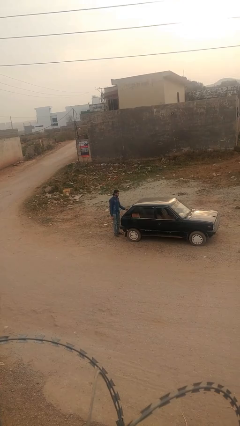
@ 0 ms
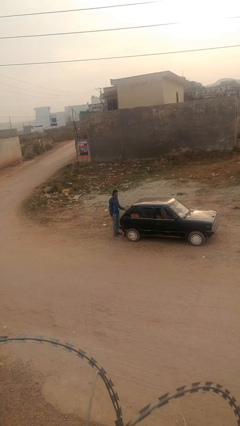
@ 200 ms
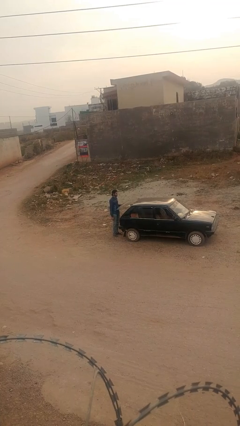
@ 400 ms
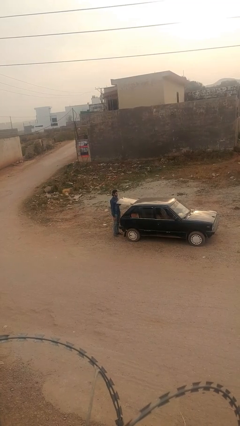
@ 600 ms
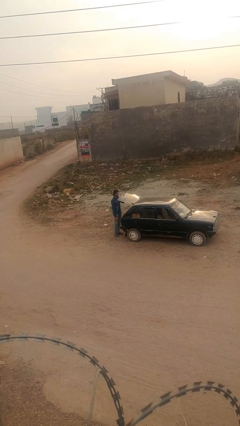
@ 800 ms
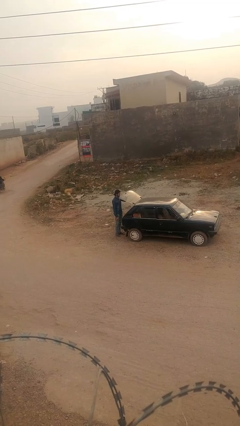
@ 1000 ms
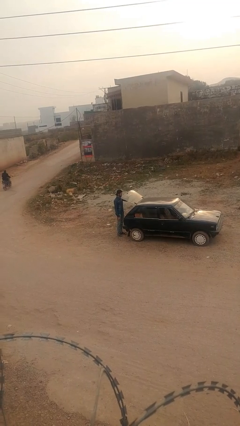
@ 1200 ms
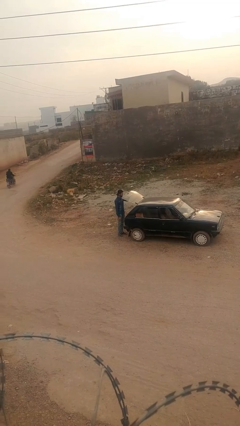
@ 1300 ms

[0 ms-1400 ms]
person opens car trunk

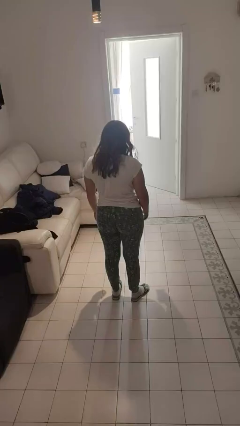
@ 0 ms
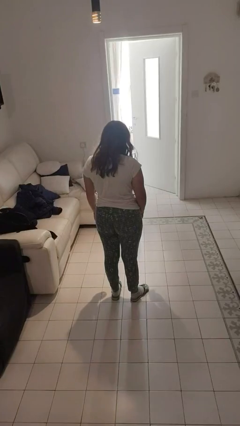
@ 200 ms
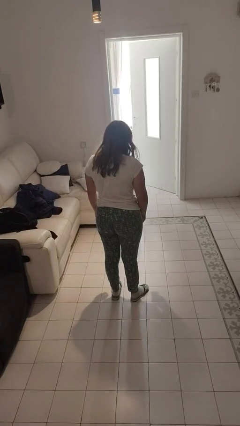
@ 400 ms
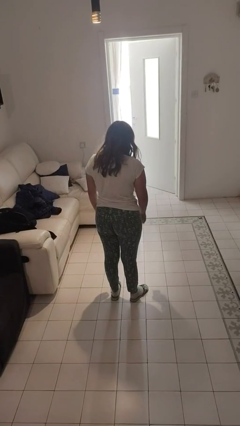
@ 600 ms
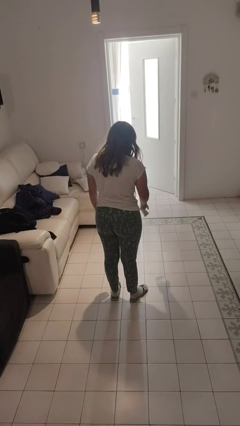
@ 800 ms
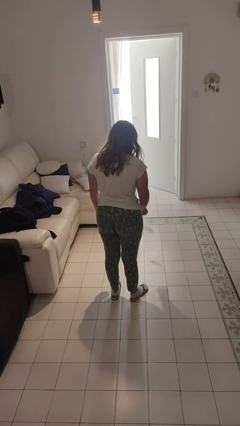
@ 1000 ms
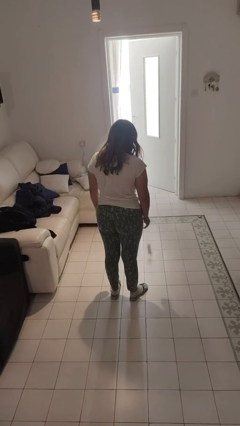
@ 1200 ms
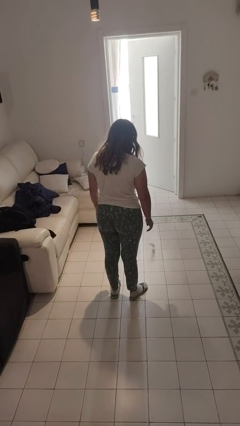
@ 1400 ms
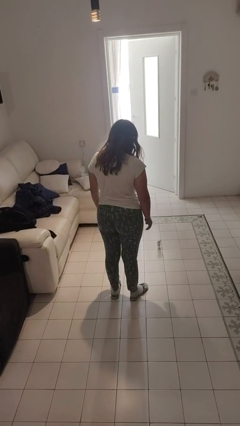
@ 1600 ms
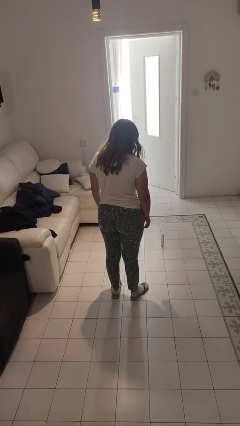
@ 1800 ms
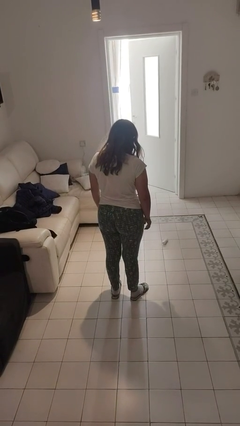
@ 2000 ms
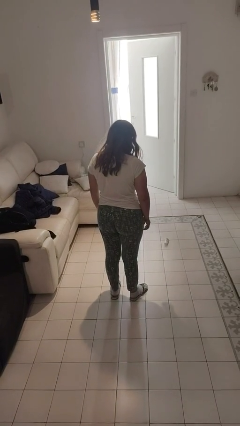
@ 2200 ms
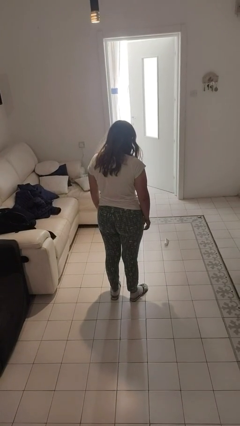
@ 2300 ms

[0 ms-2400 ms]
person throws object to ground

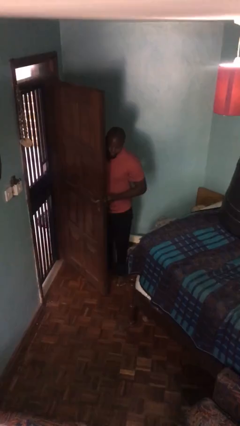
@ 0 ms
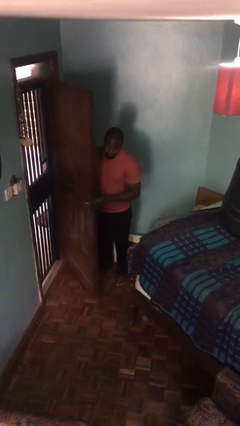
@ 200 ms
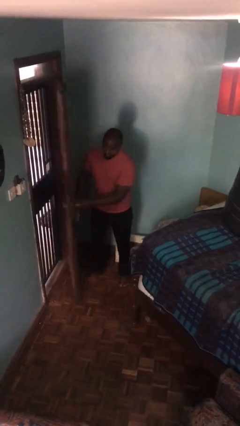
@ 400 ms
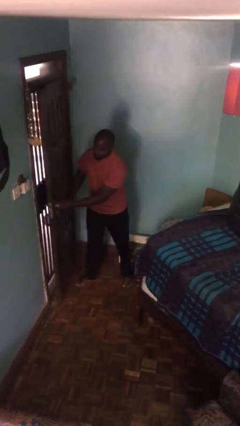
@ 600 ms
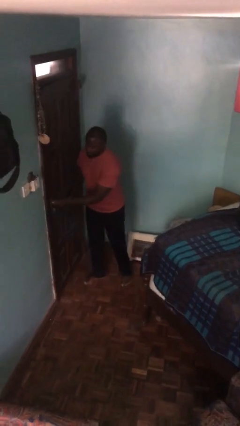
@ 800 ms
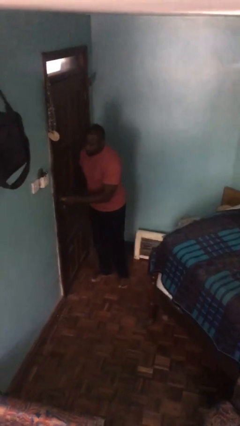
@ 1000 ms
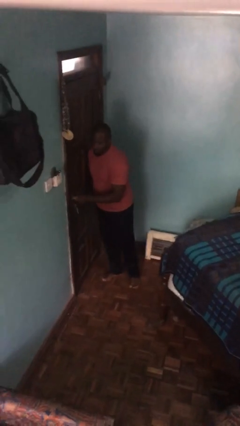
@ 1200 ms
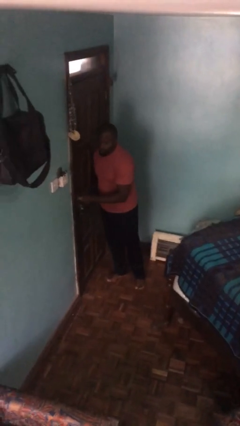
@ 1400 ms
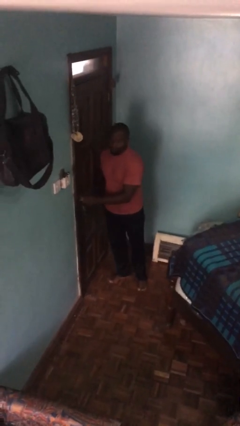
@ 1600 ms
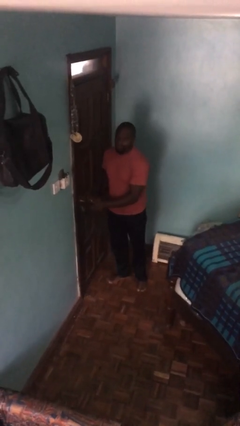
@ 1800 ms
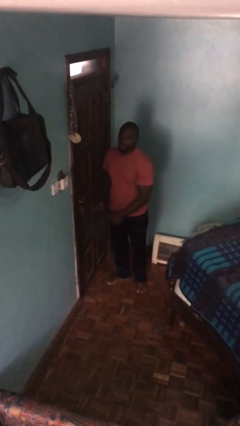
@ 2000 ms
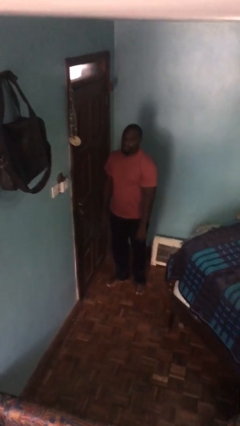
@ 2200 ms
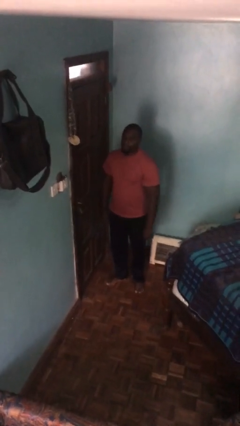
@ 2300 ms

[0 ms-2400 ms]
person closes facility door

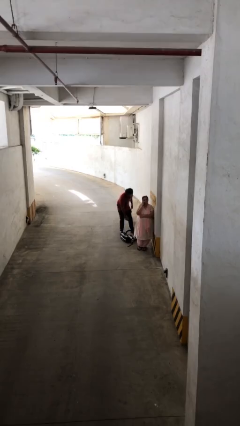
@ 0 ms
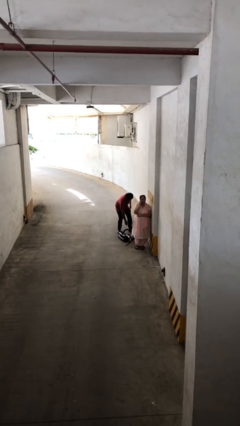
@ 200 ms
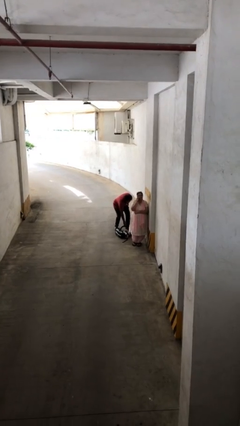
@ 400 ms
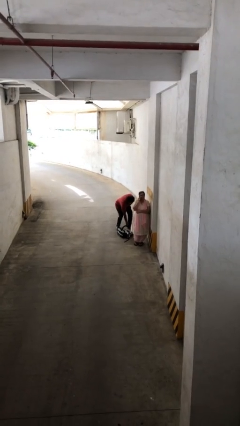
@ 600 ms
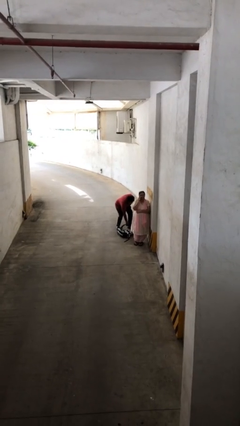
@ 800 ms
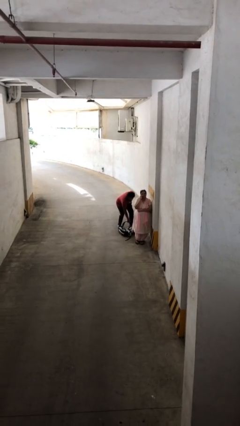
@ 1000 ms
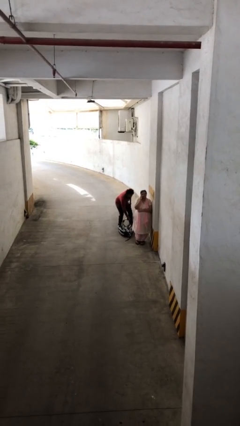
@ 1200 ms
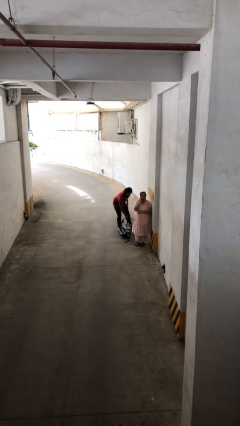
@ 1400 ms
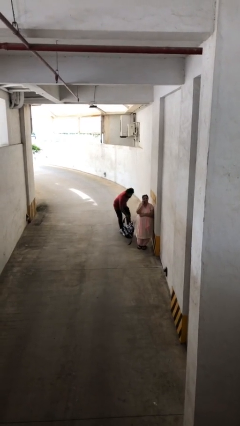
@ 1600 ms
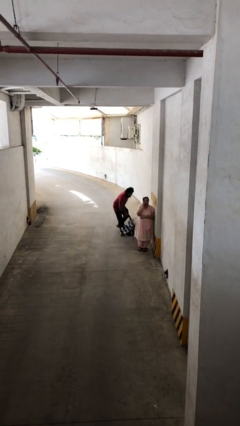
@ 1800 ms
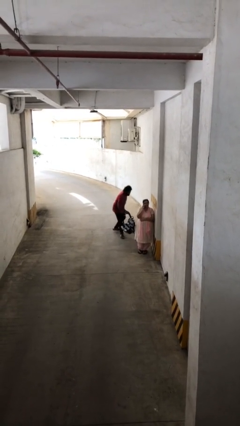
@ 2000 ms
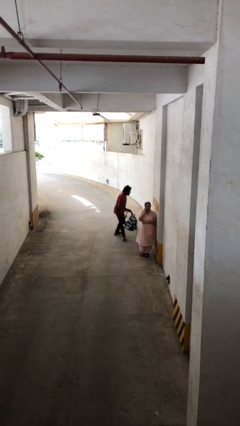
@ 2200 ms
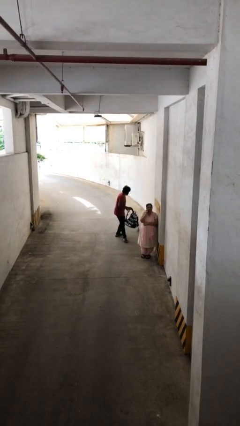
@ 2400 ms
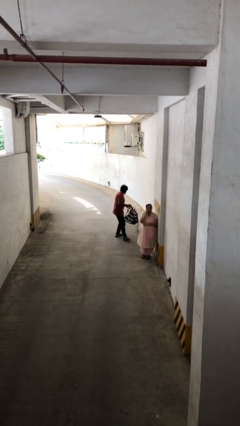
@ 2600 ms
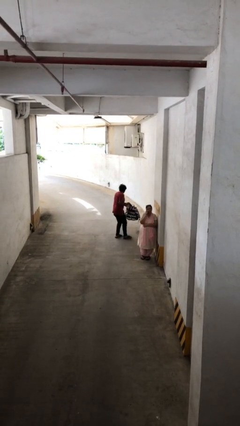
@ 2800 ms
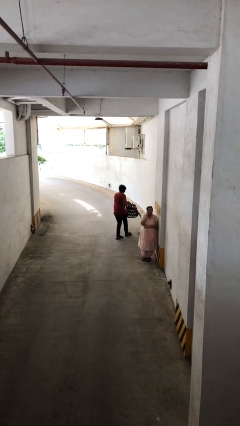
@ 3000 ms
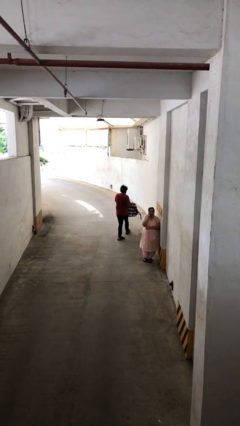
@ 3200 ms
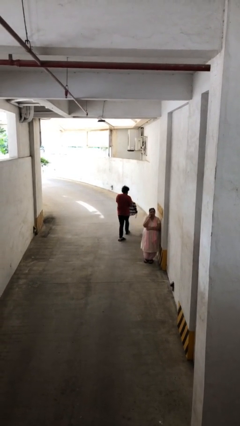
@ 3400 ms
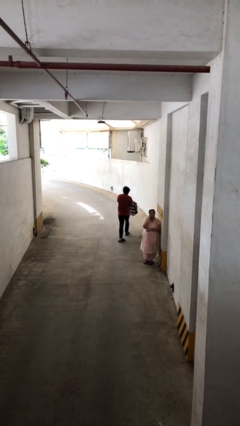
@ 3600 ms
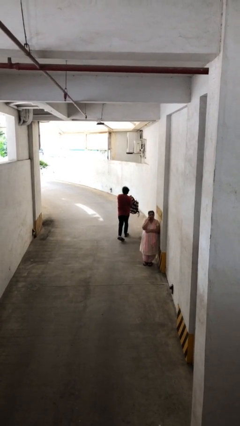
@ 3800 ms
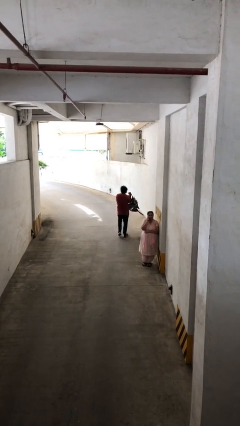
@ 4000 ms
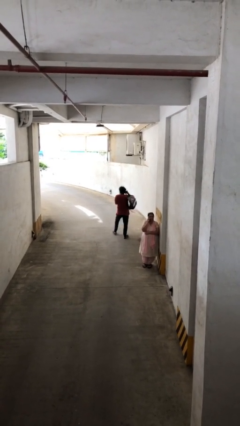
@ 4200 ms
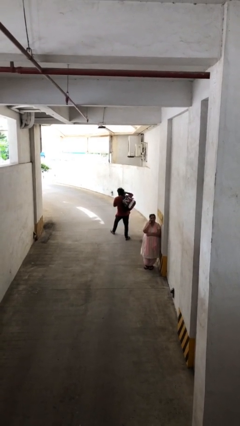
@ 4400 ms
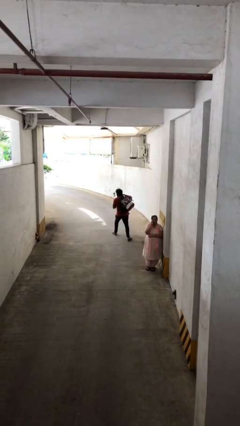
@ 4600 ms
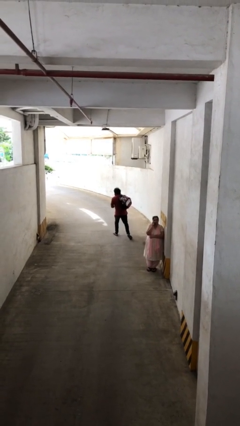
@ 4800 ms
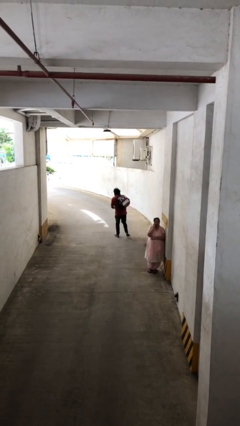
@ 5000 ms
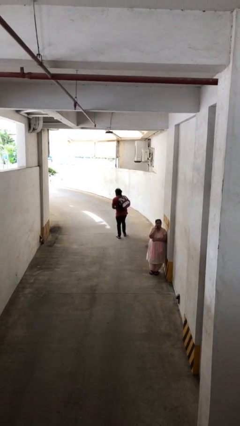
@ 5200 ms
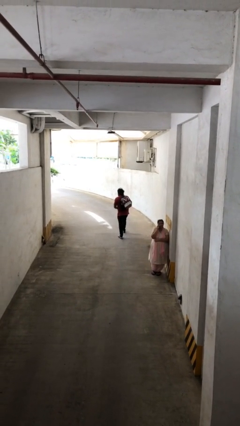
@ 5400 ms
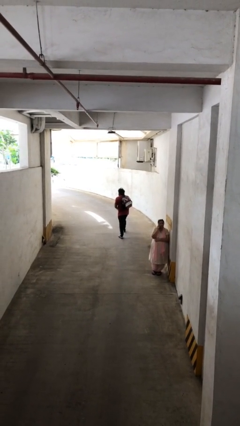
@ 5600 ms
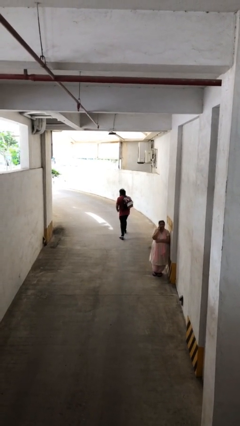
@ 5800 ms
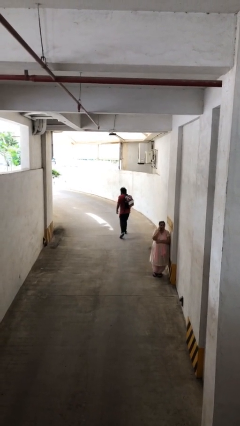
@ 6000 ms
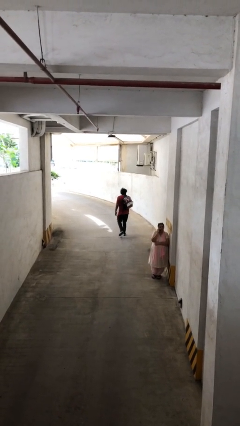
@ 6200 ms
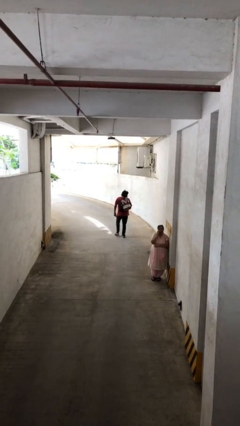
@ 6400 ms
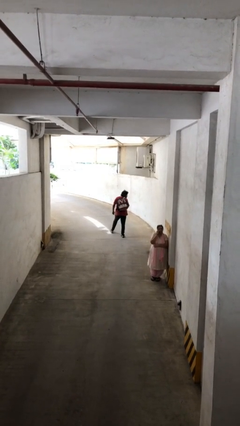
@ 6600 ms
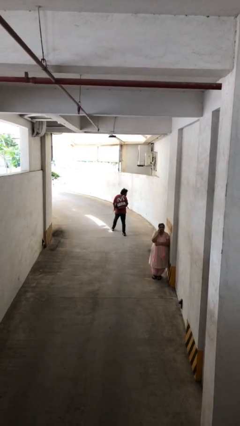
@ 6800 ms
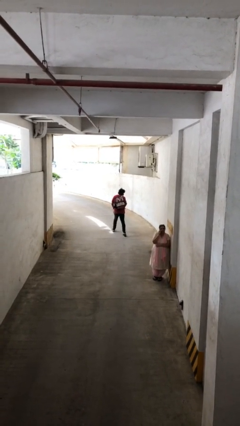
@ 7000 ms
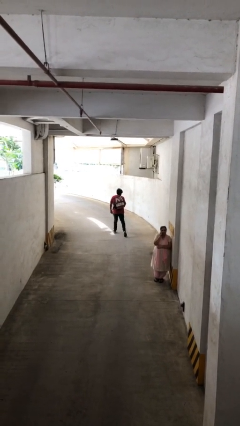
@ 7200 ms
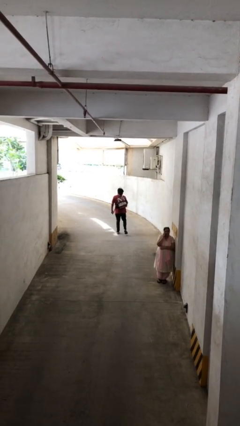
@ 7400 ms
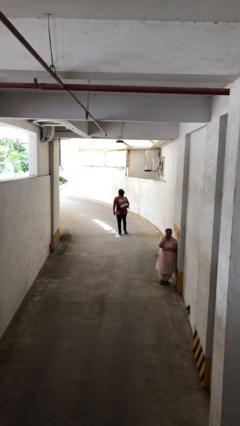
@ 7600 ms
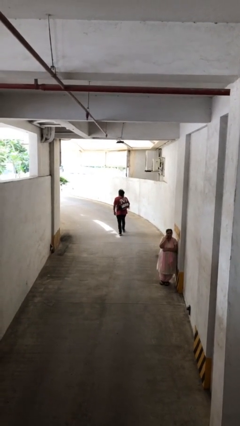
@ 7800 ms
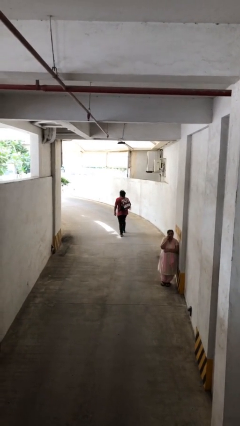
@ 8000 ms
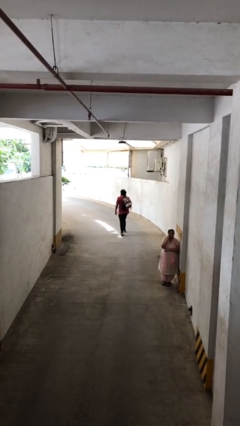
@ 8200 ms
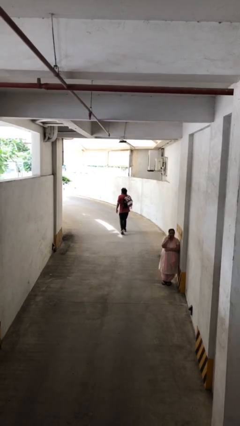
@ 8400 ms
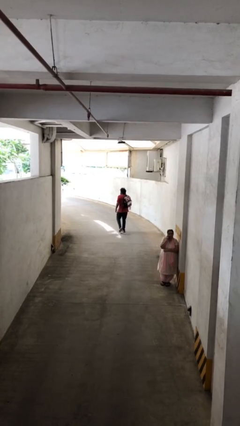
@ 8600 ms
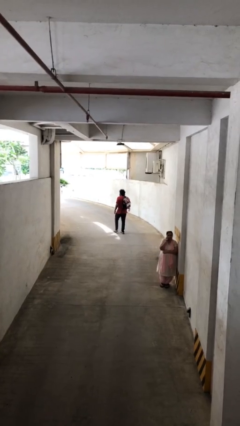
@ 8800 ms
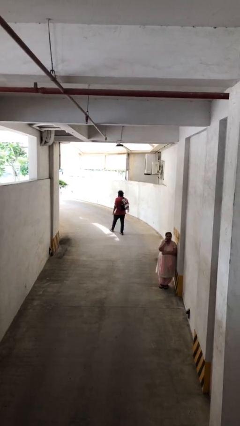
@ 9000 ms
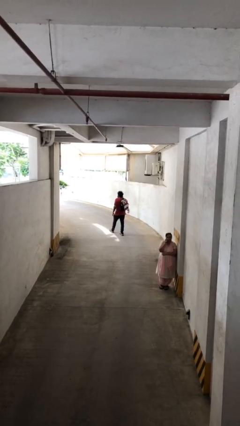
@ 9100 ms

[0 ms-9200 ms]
person steals object from person

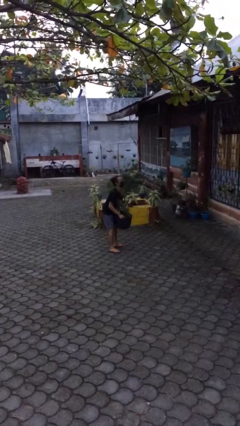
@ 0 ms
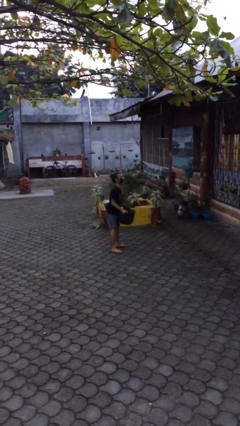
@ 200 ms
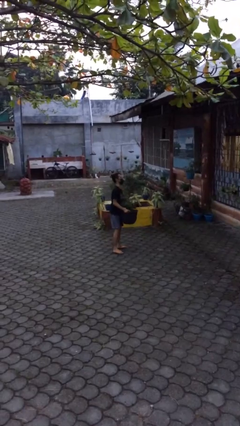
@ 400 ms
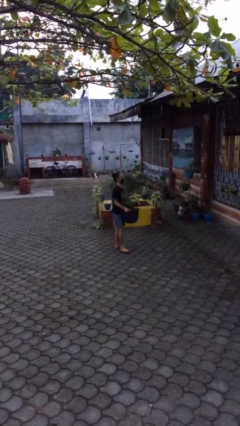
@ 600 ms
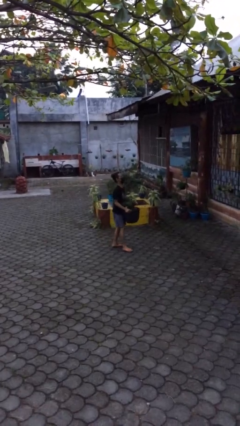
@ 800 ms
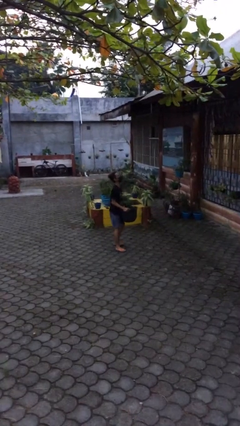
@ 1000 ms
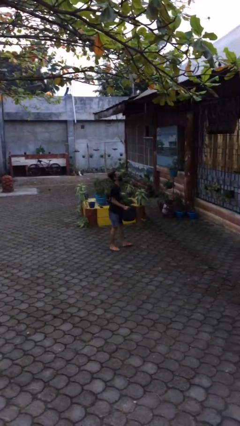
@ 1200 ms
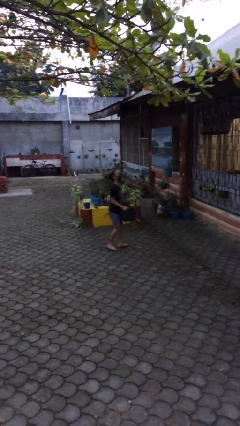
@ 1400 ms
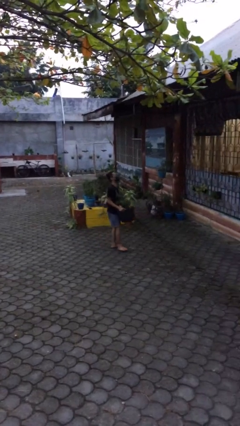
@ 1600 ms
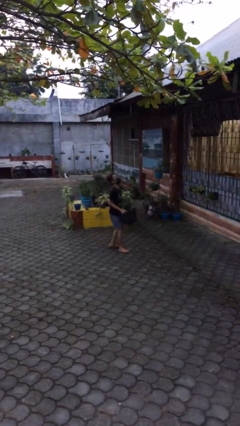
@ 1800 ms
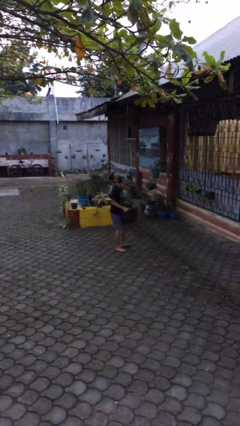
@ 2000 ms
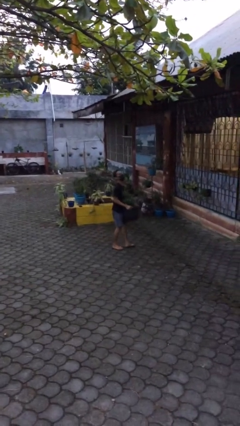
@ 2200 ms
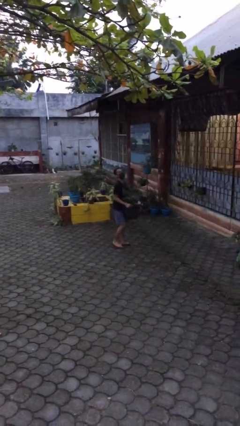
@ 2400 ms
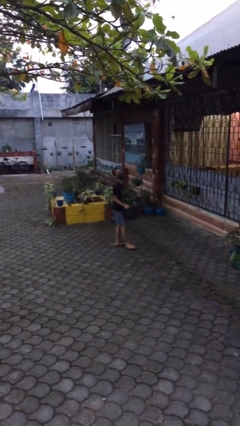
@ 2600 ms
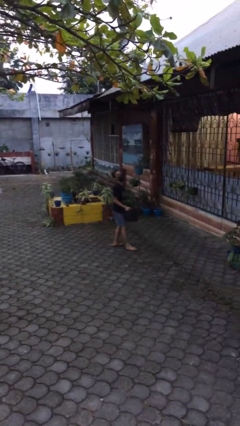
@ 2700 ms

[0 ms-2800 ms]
person carries heavy object
